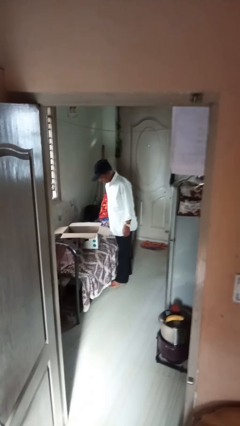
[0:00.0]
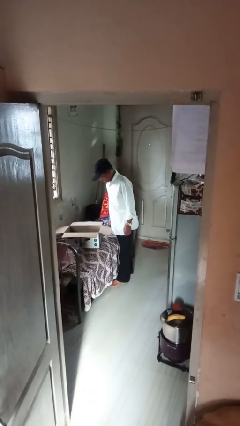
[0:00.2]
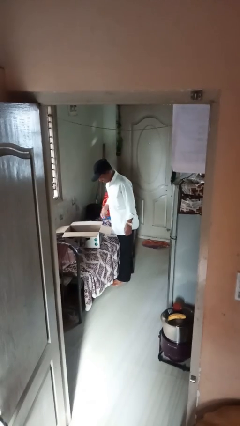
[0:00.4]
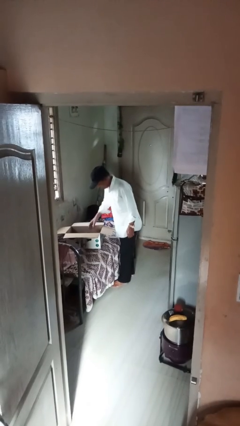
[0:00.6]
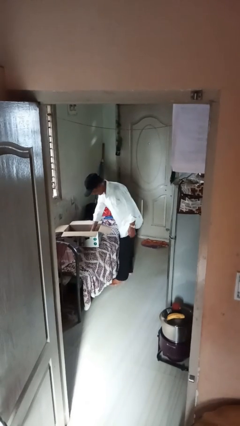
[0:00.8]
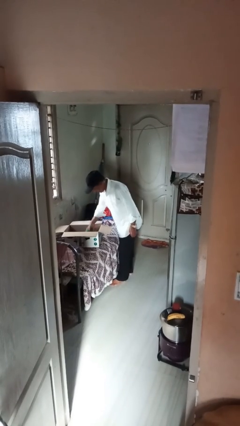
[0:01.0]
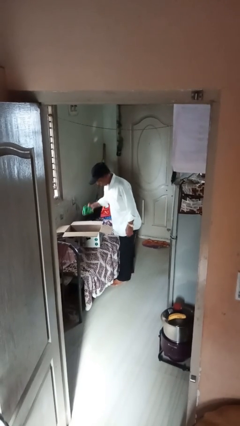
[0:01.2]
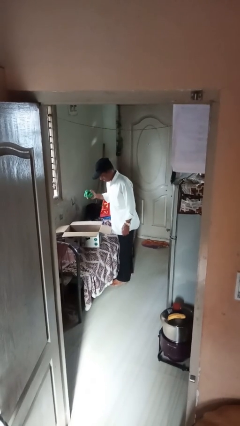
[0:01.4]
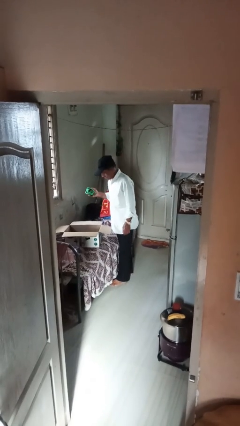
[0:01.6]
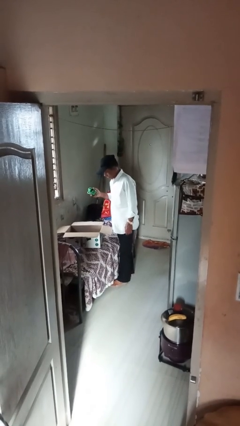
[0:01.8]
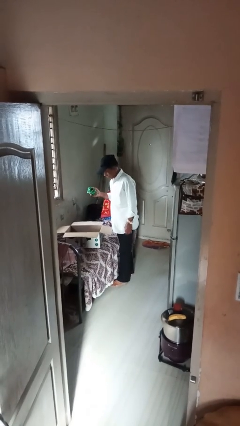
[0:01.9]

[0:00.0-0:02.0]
person takes object from box

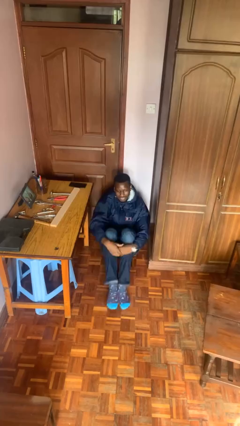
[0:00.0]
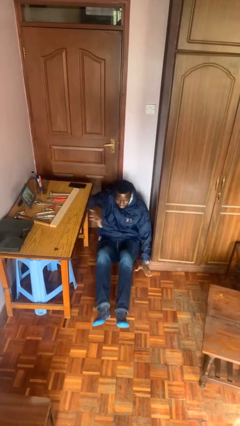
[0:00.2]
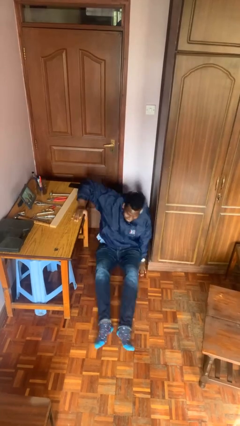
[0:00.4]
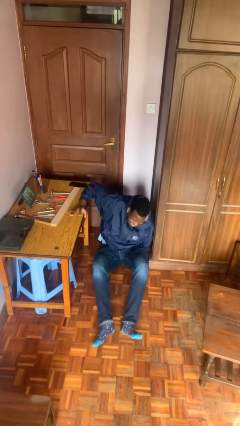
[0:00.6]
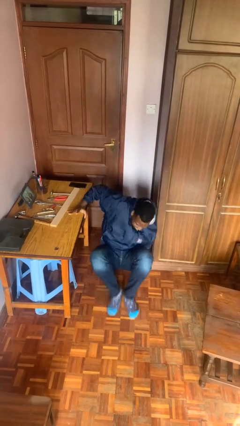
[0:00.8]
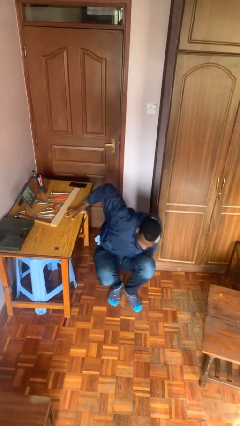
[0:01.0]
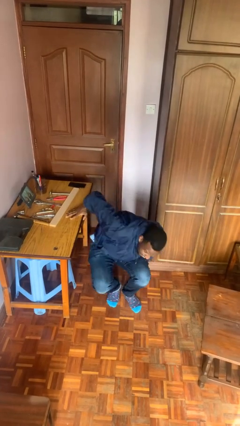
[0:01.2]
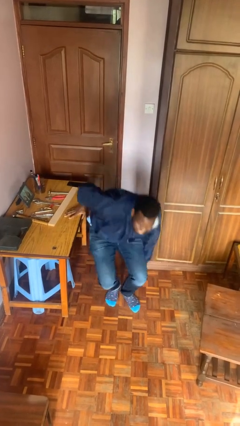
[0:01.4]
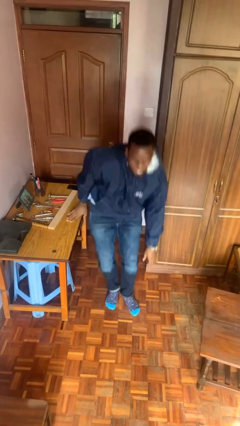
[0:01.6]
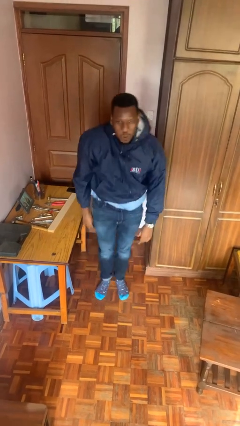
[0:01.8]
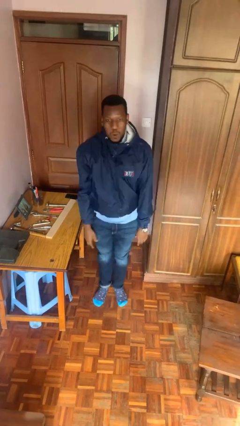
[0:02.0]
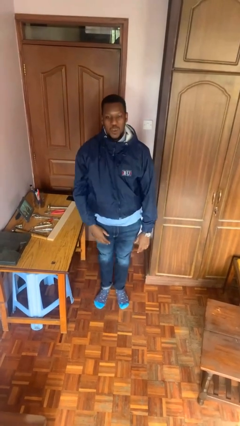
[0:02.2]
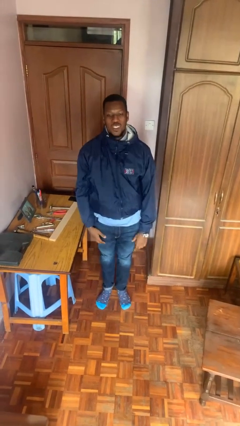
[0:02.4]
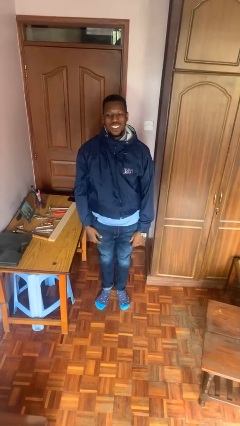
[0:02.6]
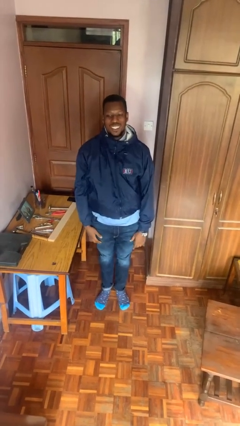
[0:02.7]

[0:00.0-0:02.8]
person stands up

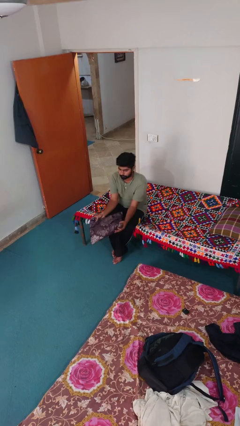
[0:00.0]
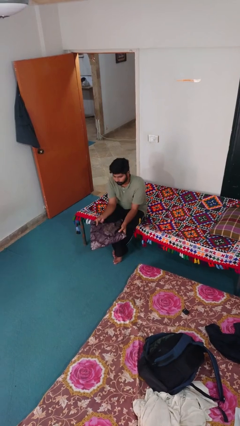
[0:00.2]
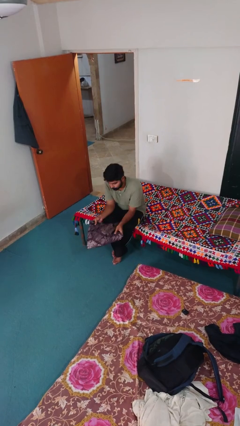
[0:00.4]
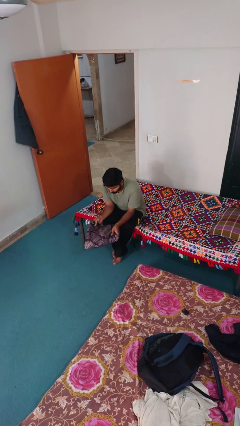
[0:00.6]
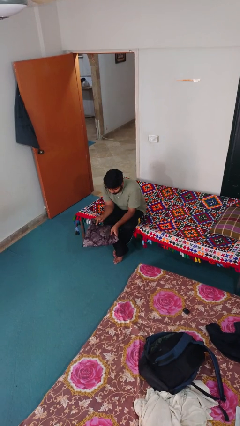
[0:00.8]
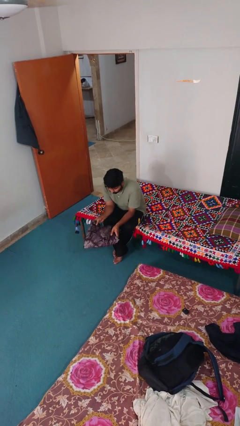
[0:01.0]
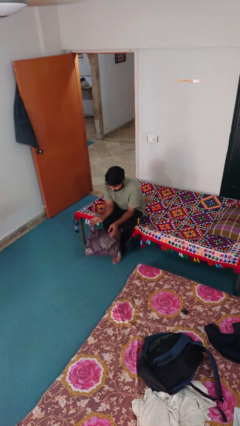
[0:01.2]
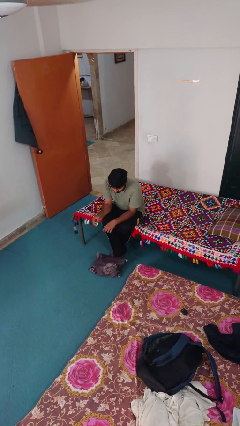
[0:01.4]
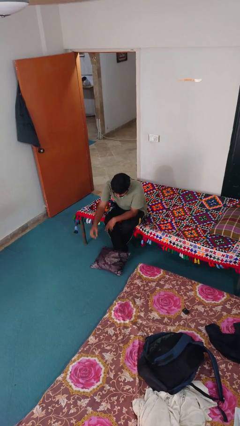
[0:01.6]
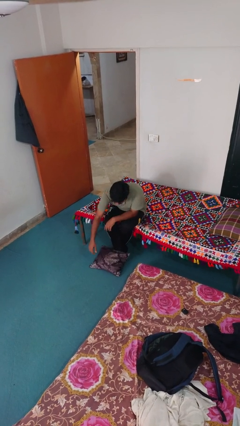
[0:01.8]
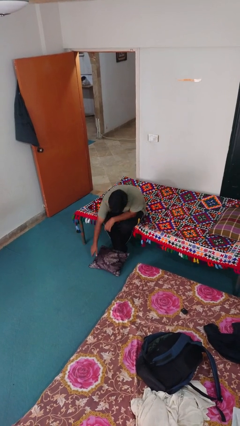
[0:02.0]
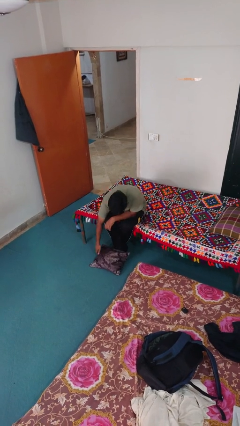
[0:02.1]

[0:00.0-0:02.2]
person drops object

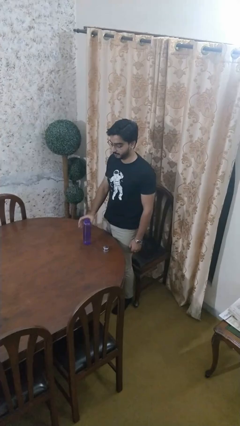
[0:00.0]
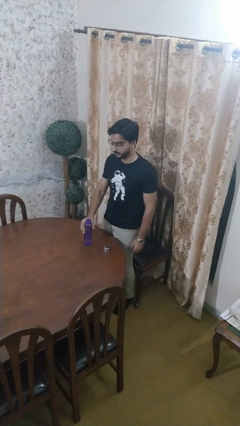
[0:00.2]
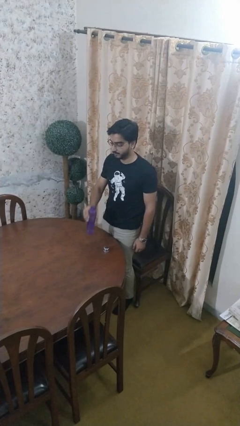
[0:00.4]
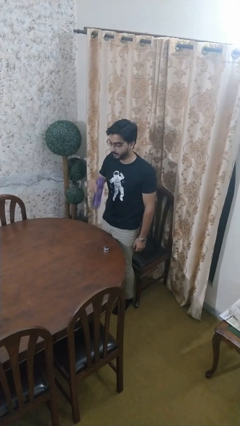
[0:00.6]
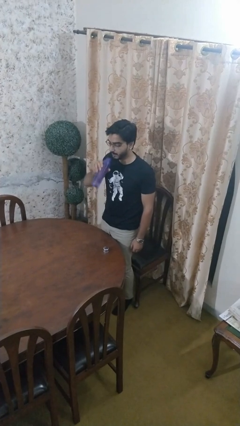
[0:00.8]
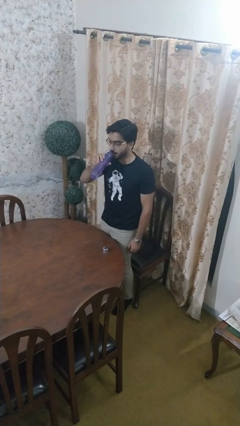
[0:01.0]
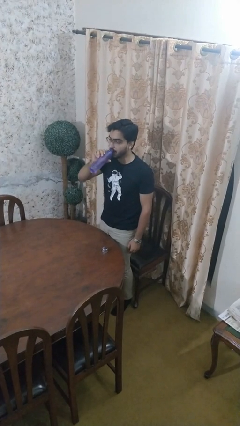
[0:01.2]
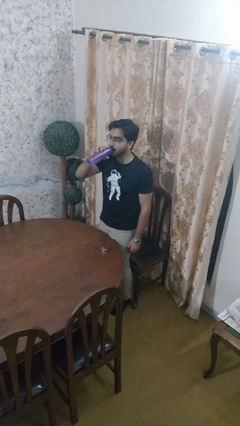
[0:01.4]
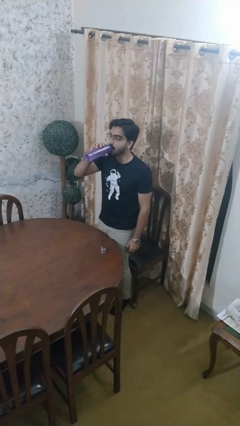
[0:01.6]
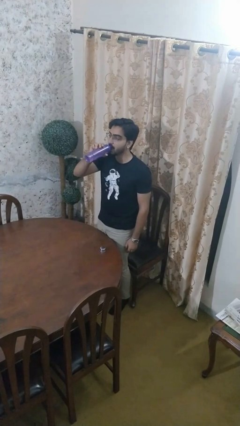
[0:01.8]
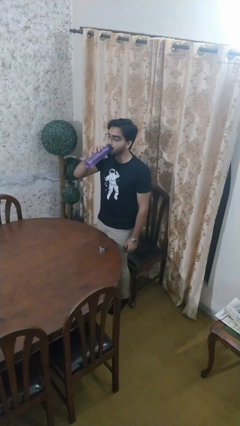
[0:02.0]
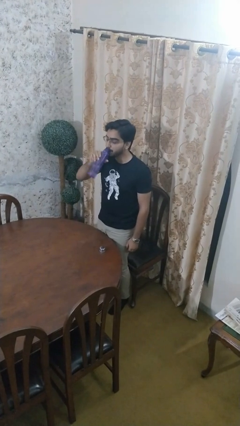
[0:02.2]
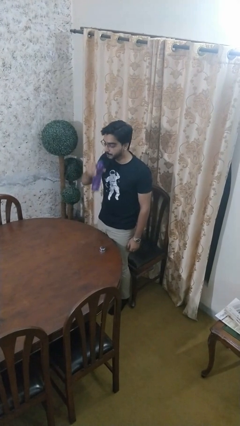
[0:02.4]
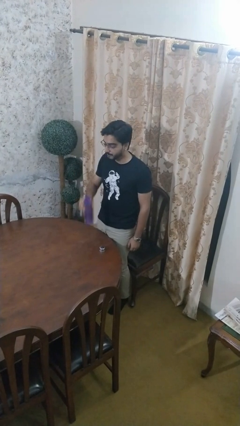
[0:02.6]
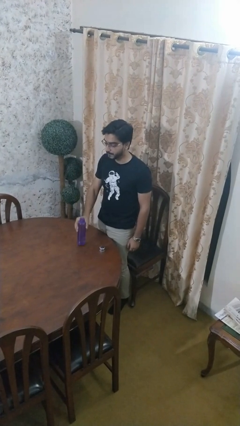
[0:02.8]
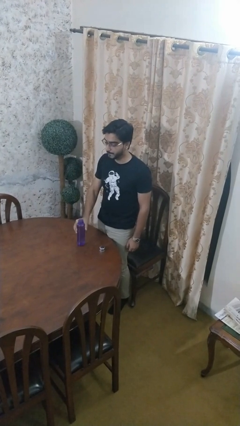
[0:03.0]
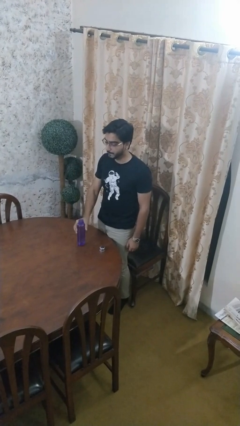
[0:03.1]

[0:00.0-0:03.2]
person drinks from bottle

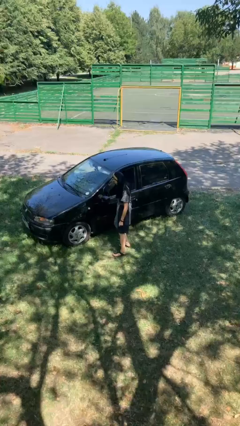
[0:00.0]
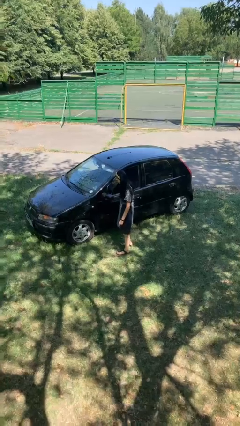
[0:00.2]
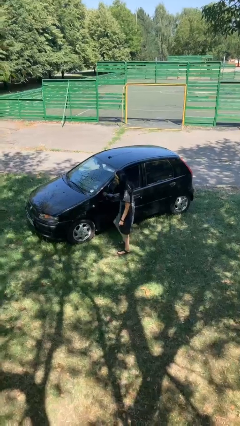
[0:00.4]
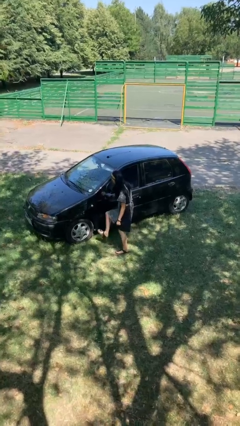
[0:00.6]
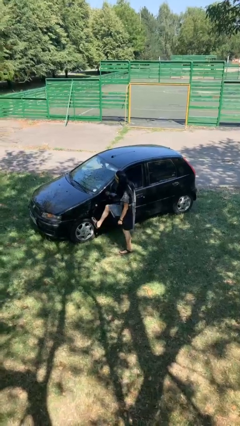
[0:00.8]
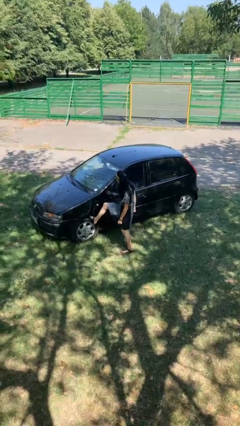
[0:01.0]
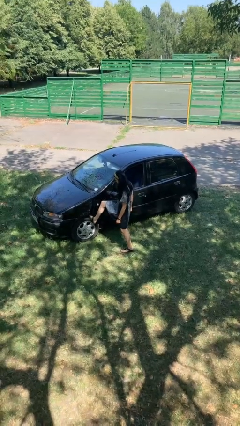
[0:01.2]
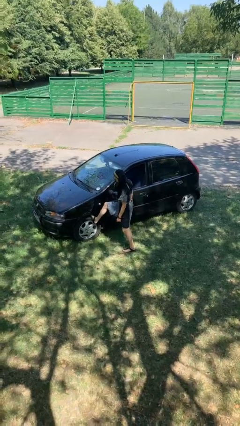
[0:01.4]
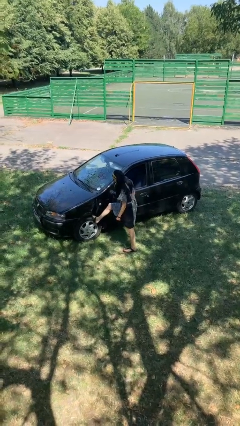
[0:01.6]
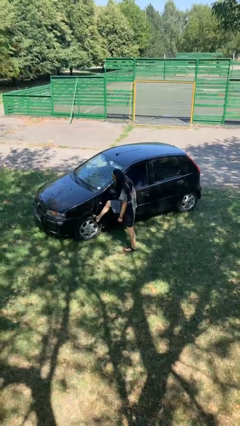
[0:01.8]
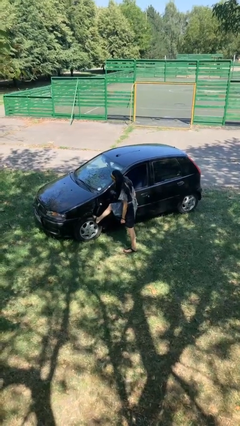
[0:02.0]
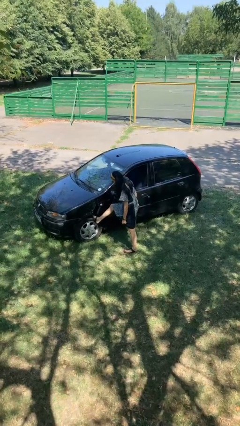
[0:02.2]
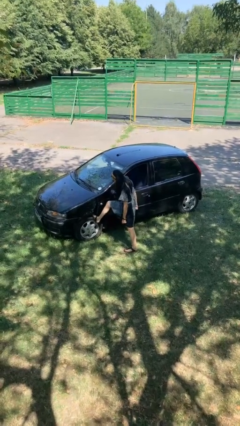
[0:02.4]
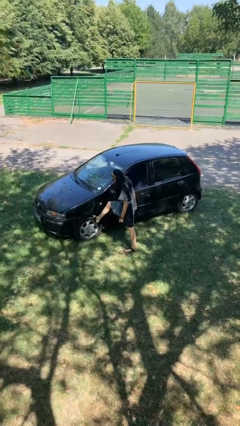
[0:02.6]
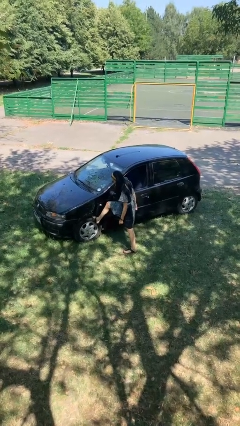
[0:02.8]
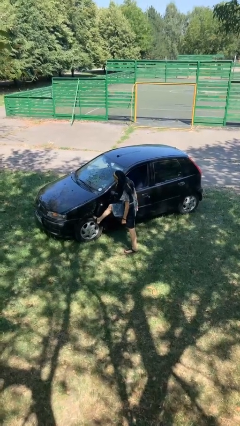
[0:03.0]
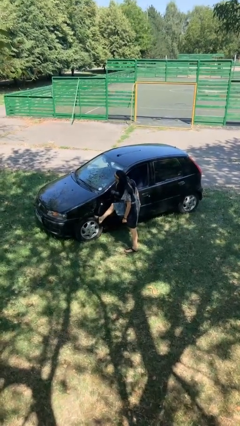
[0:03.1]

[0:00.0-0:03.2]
person kicks car tires

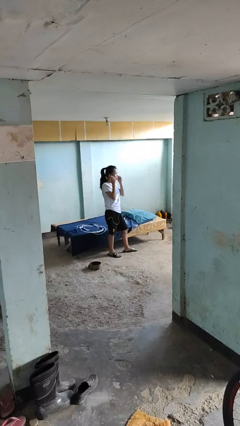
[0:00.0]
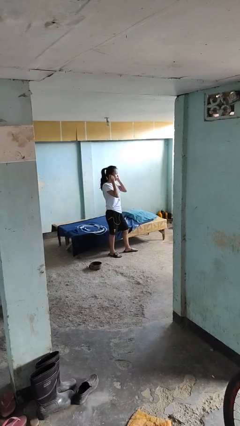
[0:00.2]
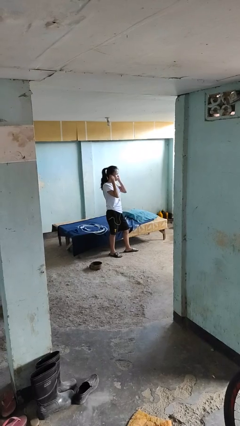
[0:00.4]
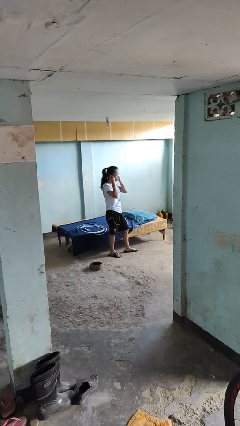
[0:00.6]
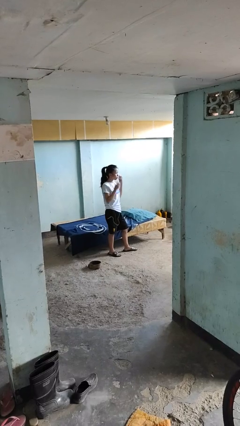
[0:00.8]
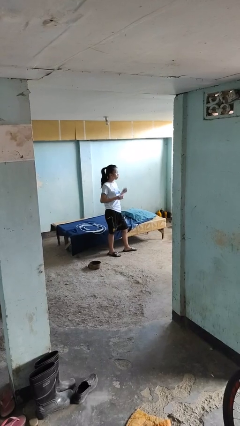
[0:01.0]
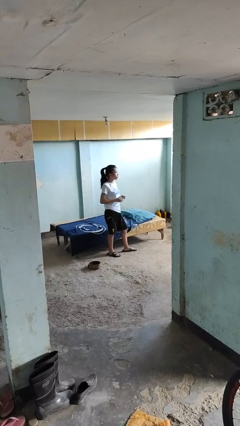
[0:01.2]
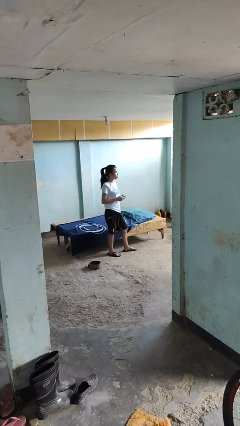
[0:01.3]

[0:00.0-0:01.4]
person takes off headphones

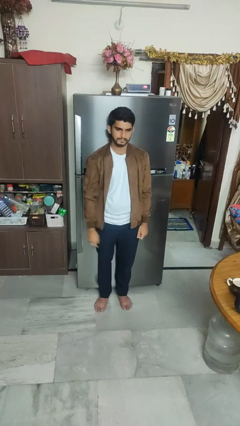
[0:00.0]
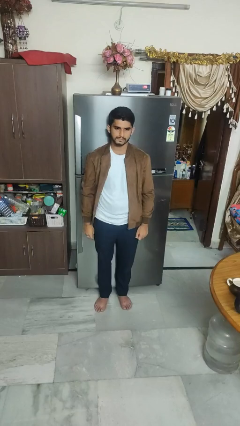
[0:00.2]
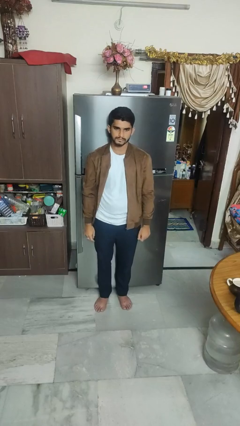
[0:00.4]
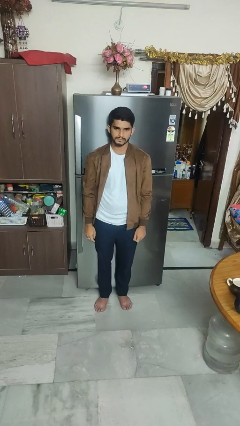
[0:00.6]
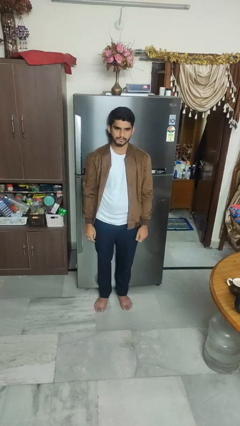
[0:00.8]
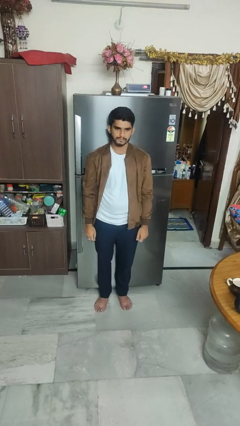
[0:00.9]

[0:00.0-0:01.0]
person gestures number one

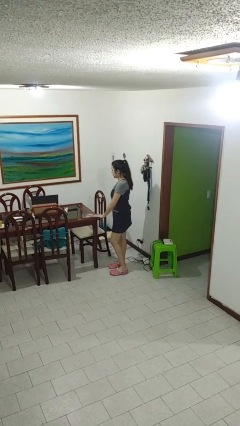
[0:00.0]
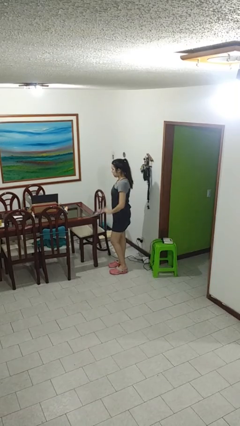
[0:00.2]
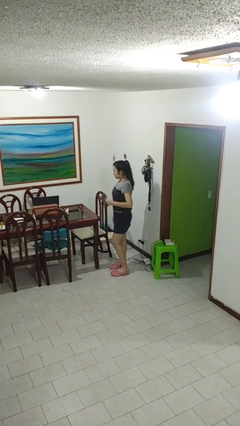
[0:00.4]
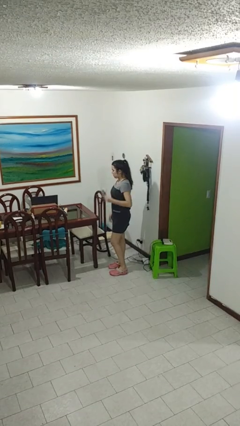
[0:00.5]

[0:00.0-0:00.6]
person picks up object from table

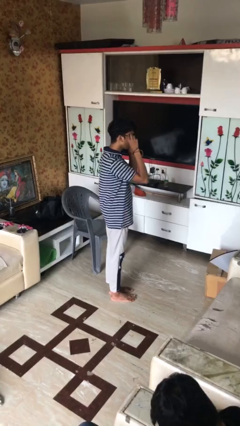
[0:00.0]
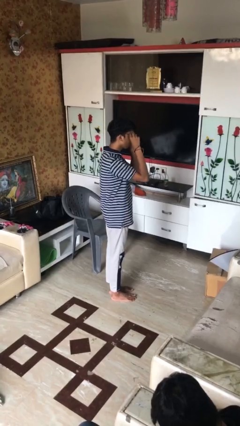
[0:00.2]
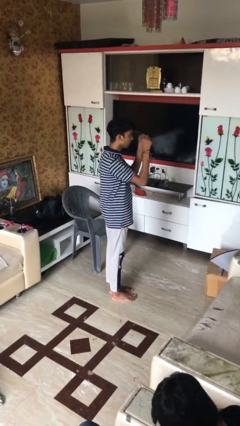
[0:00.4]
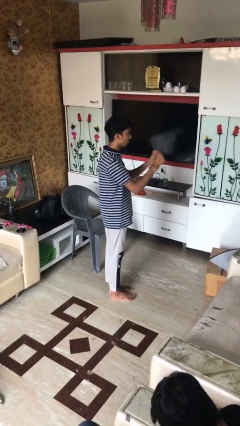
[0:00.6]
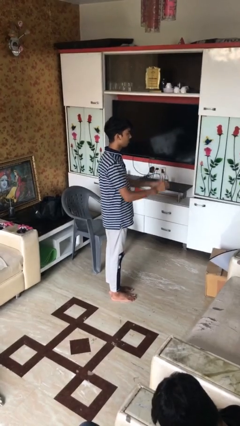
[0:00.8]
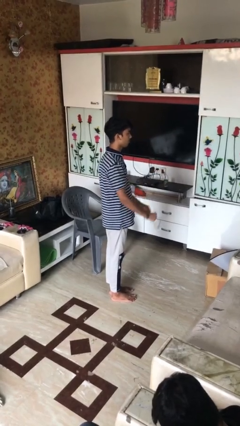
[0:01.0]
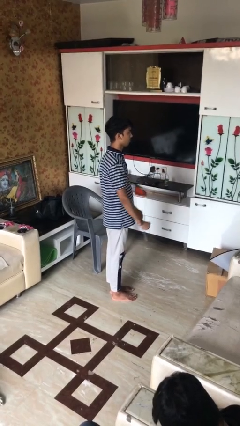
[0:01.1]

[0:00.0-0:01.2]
person takes off glasses
